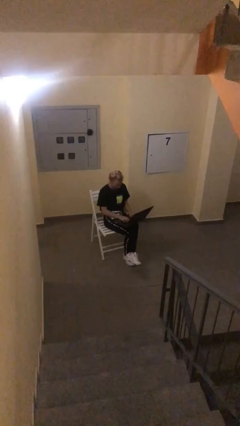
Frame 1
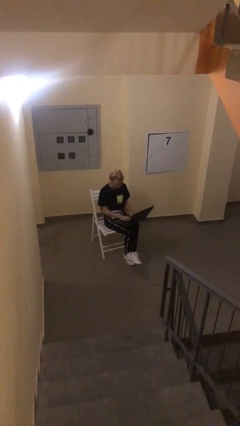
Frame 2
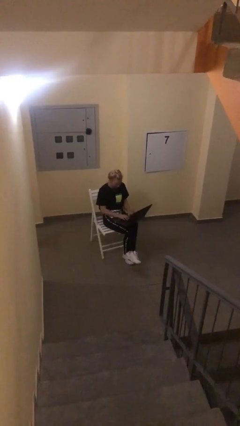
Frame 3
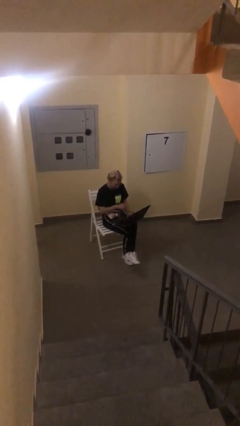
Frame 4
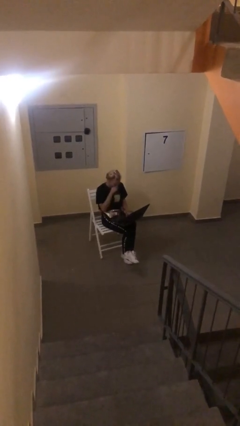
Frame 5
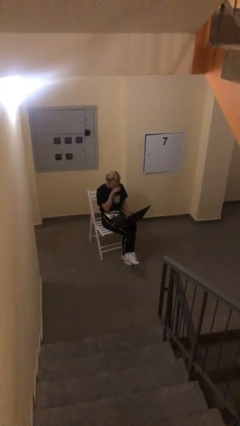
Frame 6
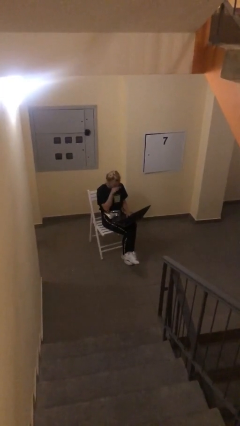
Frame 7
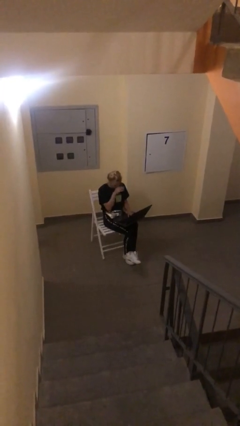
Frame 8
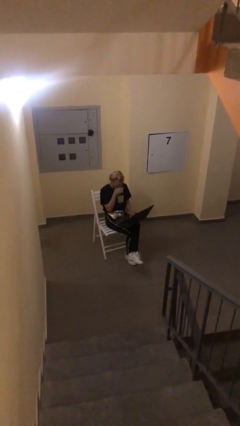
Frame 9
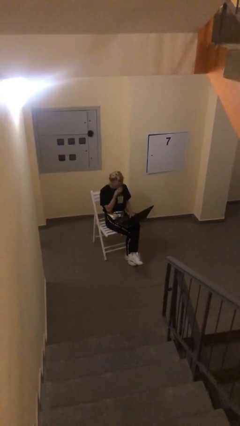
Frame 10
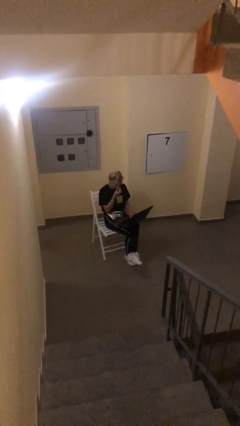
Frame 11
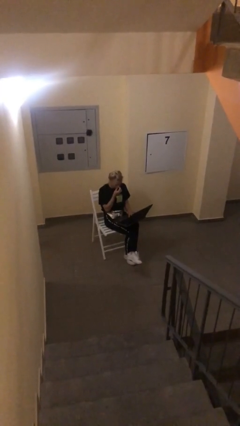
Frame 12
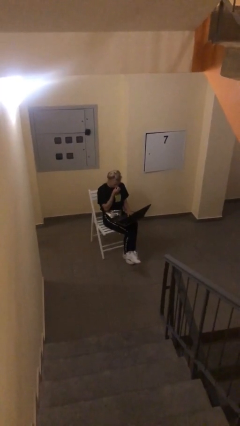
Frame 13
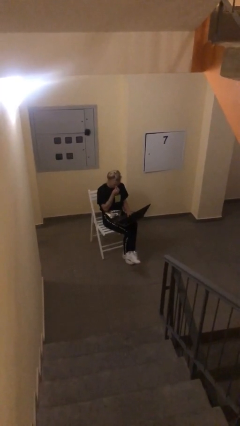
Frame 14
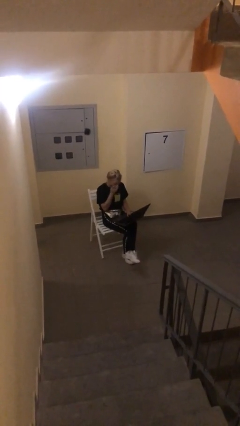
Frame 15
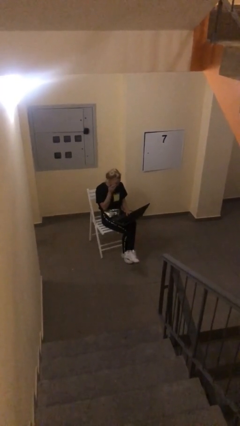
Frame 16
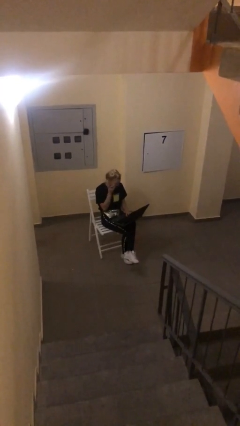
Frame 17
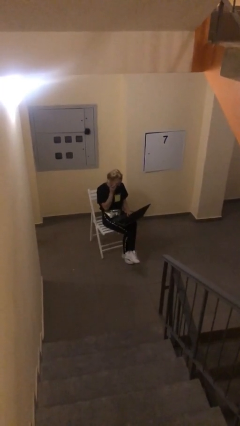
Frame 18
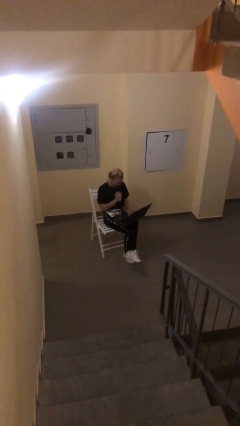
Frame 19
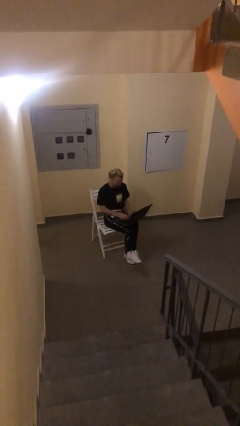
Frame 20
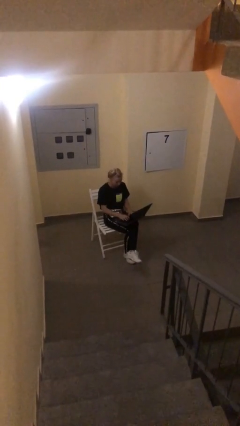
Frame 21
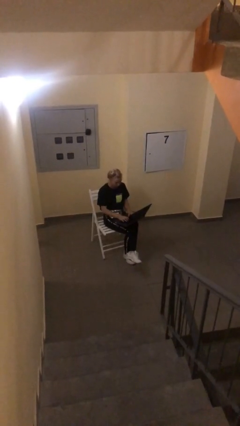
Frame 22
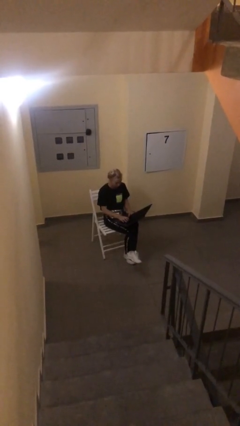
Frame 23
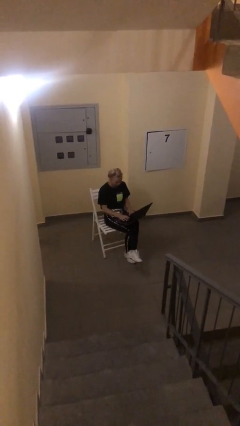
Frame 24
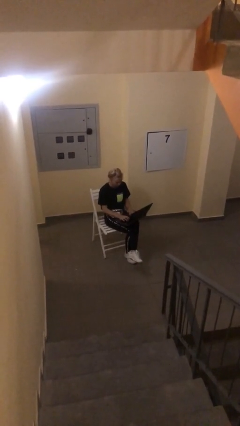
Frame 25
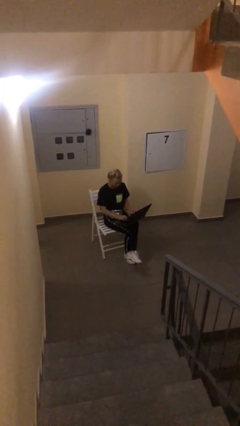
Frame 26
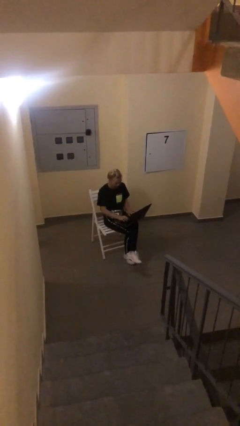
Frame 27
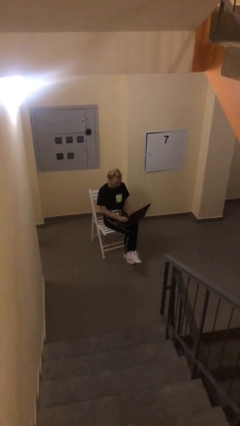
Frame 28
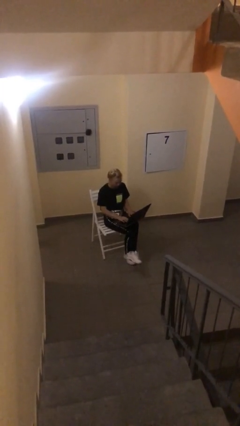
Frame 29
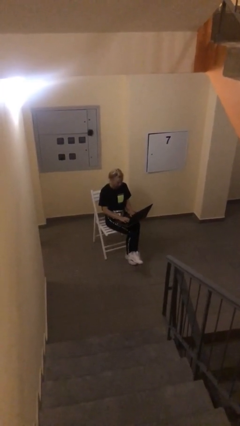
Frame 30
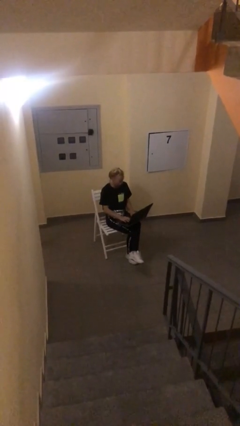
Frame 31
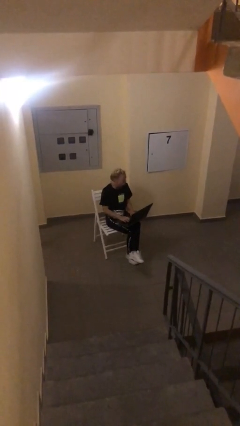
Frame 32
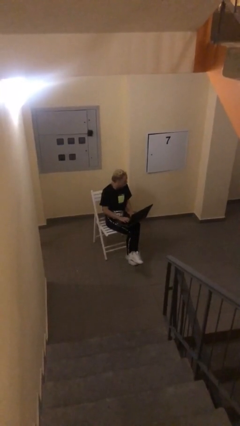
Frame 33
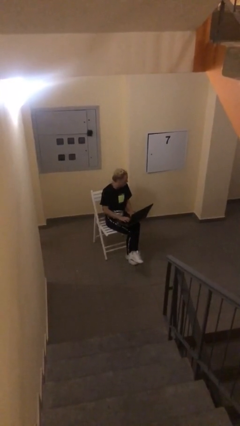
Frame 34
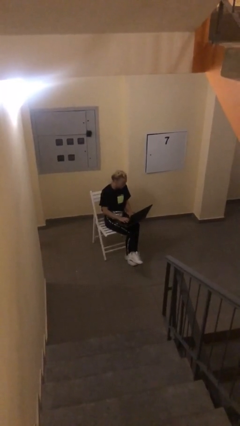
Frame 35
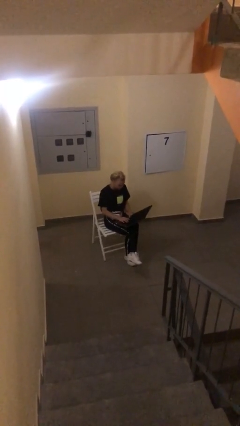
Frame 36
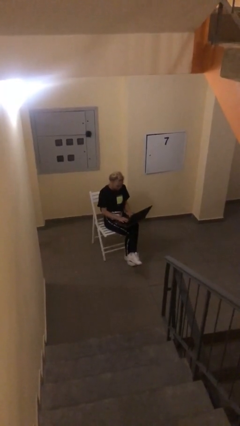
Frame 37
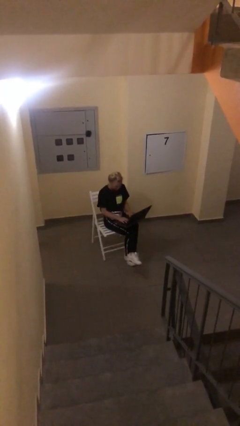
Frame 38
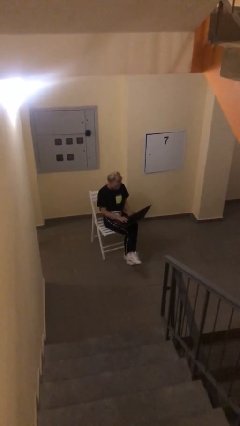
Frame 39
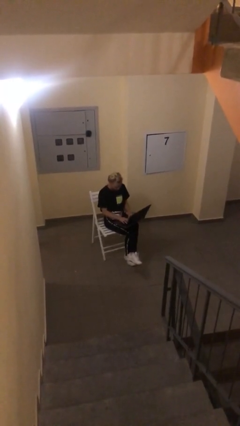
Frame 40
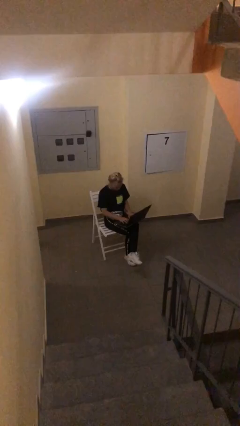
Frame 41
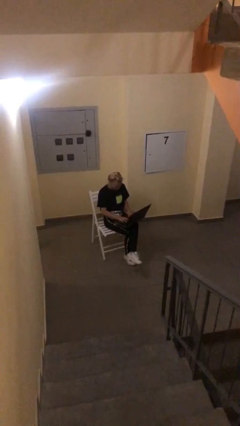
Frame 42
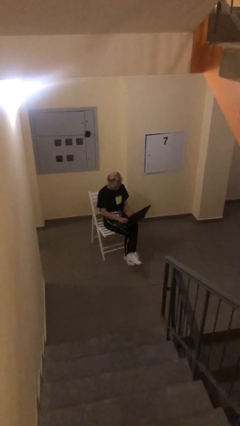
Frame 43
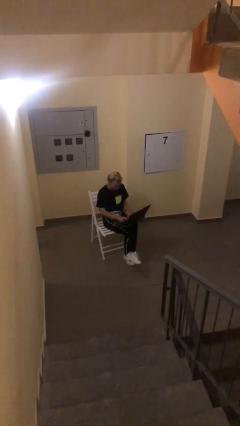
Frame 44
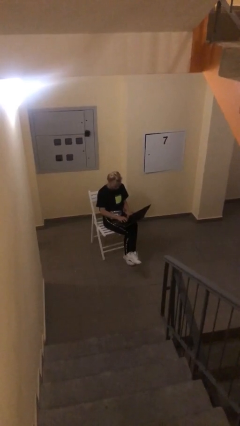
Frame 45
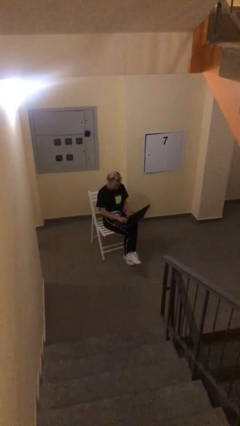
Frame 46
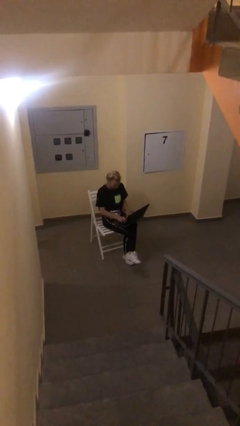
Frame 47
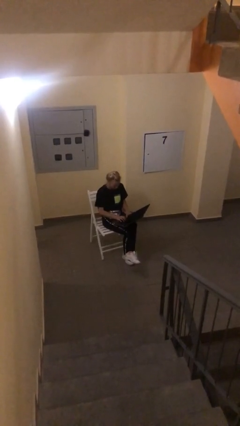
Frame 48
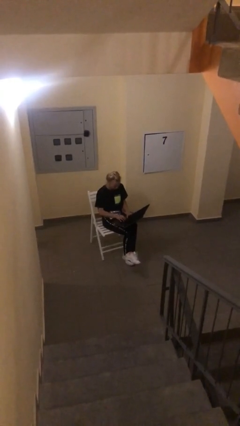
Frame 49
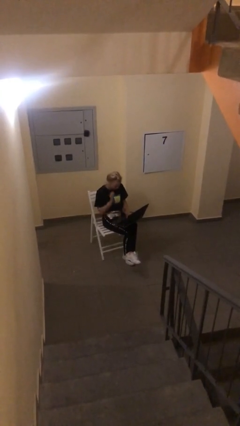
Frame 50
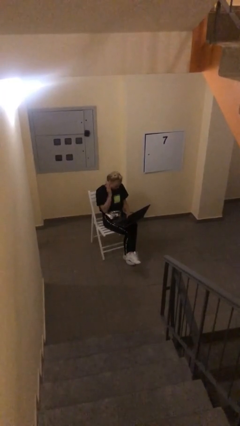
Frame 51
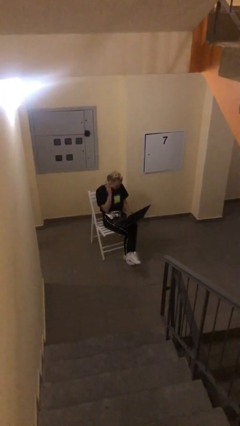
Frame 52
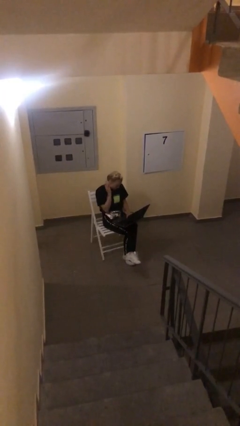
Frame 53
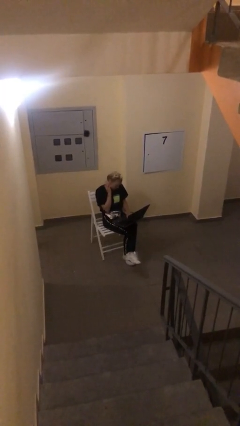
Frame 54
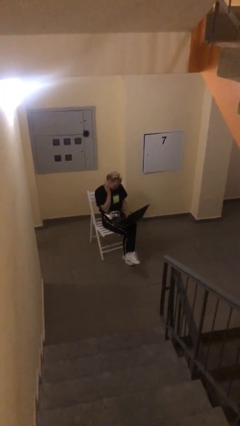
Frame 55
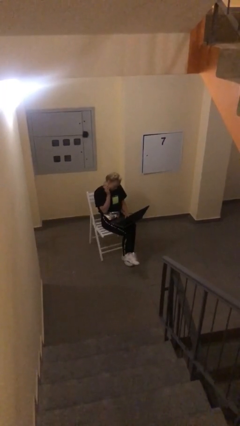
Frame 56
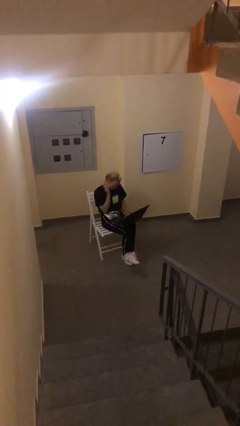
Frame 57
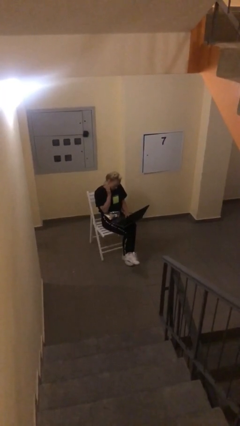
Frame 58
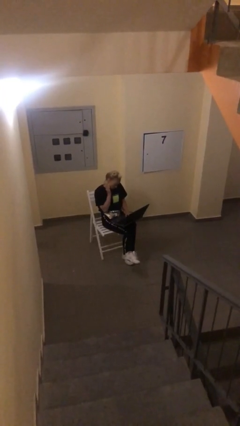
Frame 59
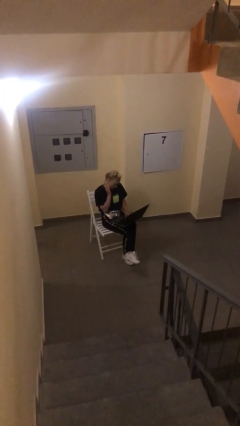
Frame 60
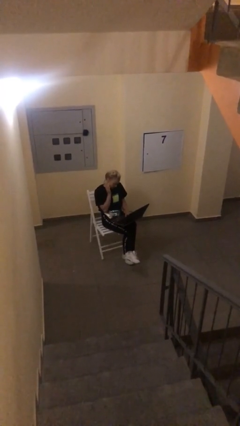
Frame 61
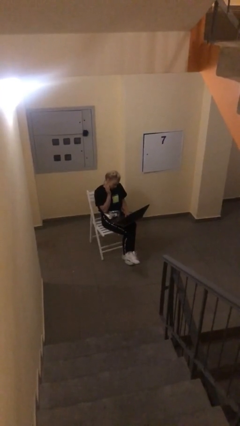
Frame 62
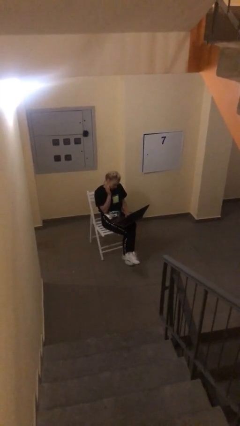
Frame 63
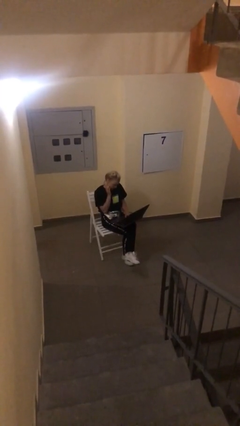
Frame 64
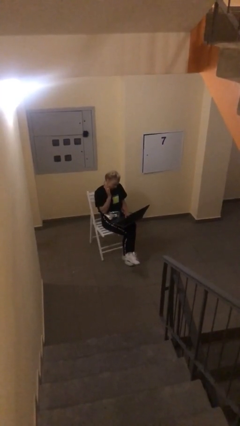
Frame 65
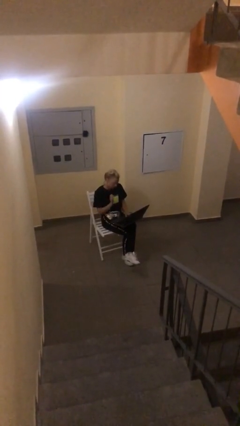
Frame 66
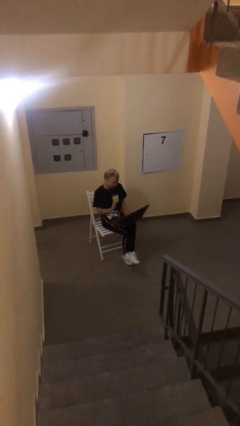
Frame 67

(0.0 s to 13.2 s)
person interacts with laptop

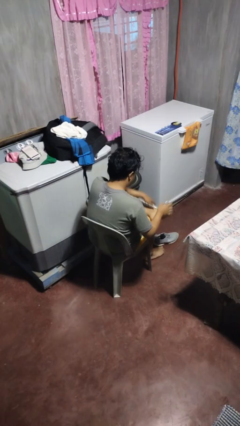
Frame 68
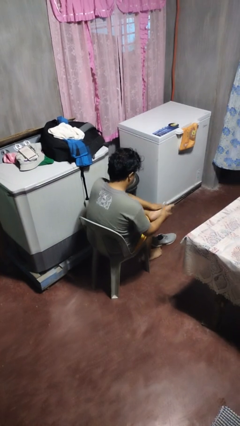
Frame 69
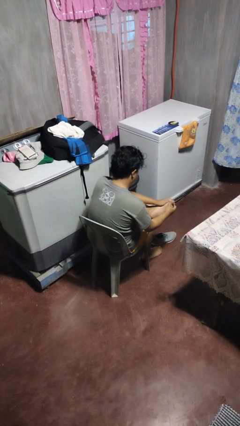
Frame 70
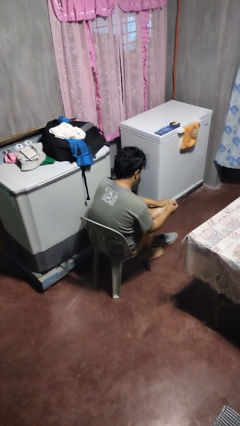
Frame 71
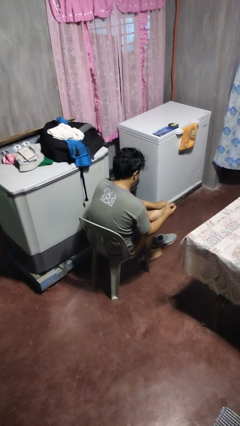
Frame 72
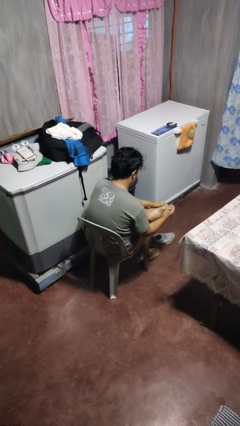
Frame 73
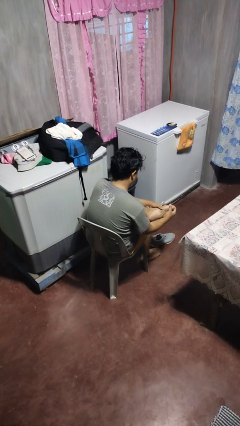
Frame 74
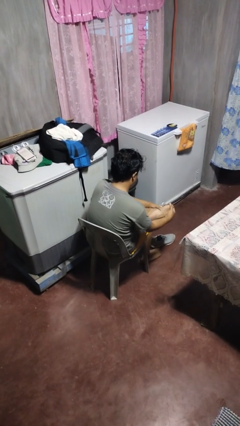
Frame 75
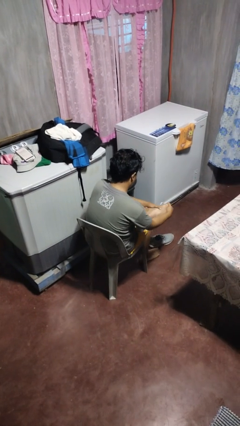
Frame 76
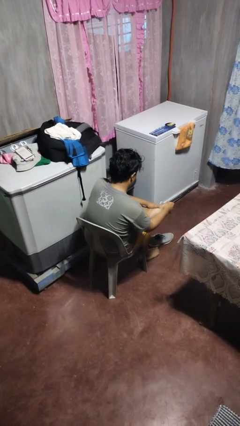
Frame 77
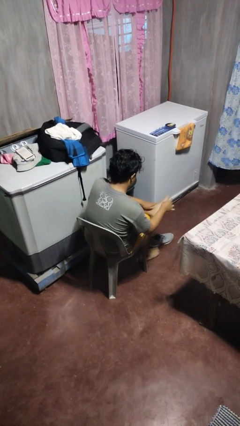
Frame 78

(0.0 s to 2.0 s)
person rubs foot

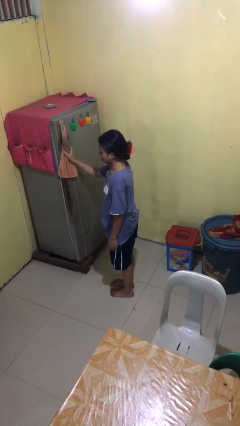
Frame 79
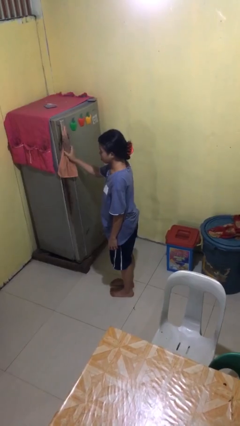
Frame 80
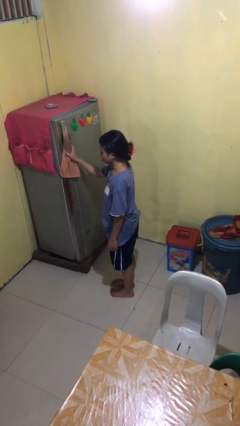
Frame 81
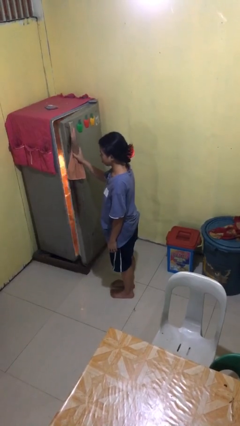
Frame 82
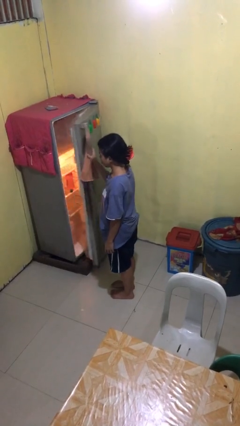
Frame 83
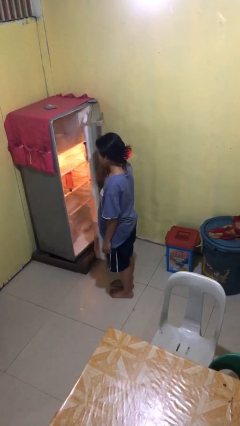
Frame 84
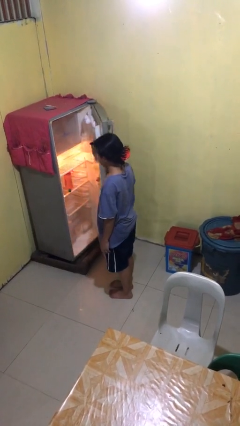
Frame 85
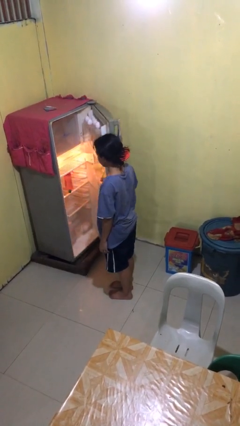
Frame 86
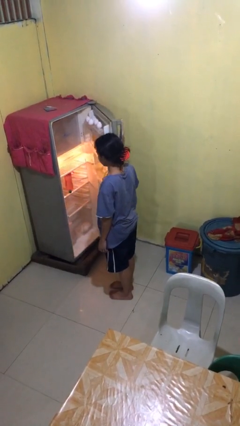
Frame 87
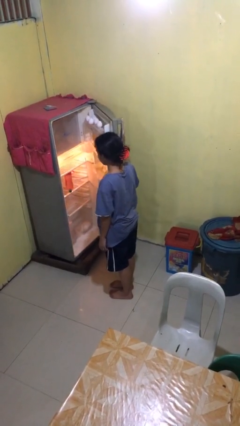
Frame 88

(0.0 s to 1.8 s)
person opens refrigerator

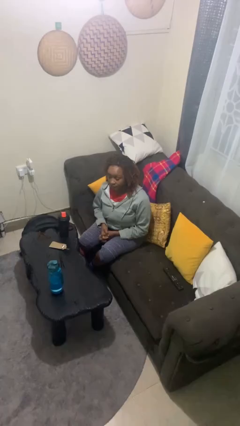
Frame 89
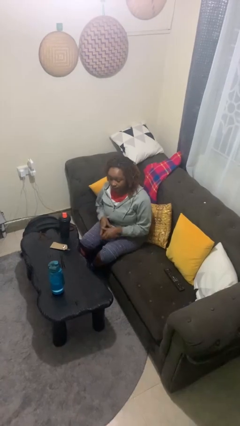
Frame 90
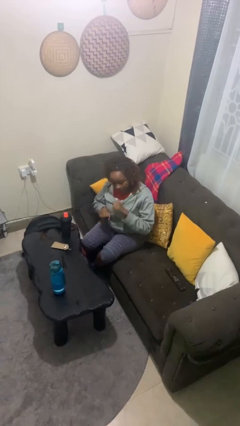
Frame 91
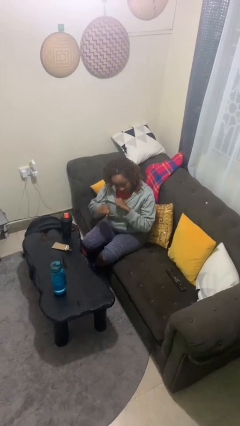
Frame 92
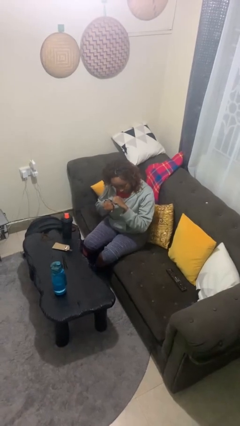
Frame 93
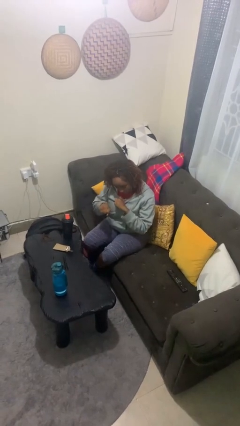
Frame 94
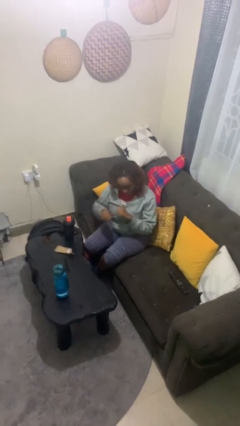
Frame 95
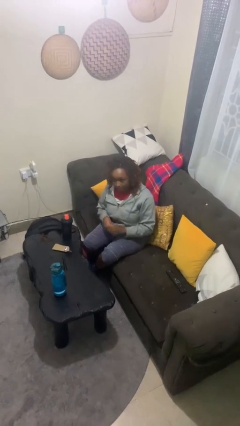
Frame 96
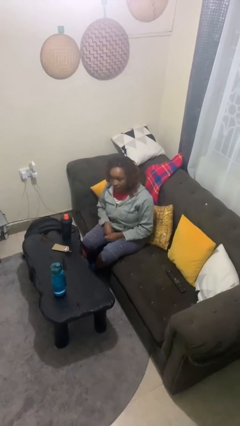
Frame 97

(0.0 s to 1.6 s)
person punches
